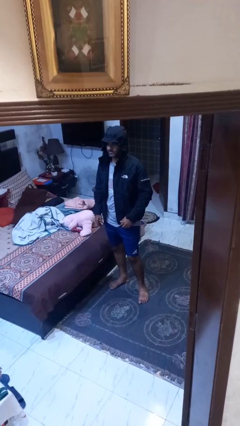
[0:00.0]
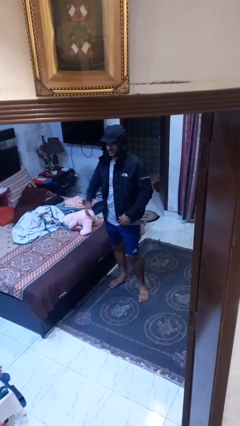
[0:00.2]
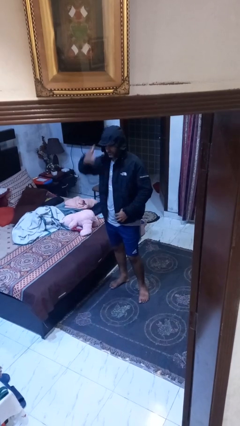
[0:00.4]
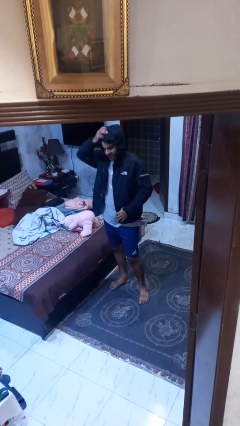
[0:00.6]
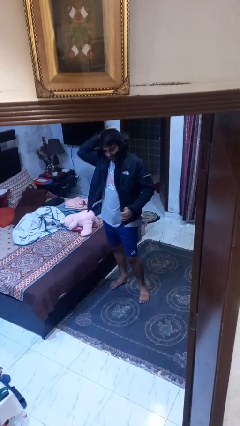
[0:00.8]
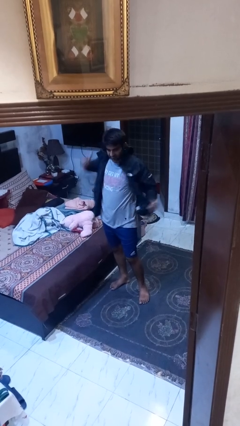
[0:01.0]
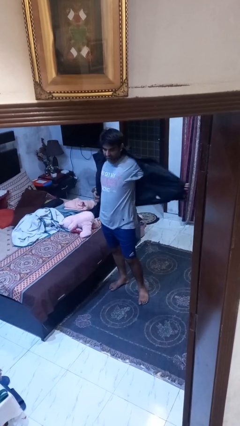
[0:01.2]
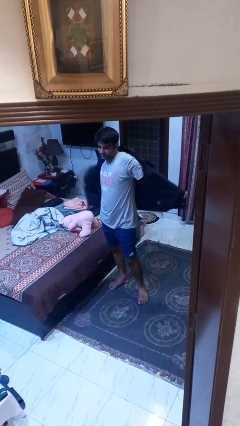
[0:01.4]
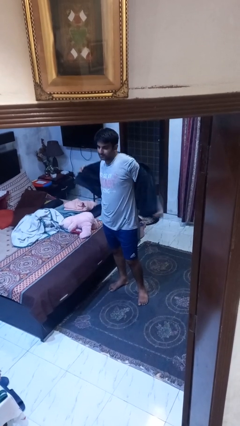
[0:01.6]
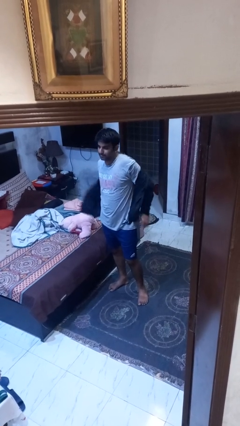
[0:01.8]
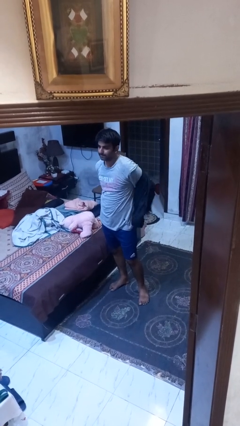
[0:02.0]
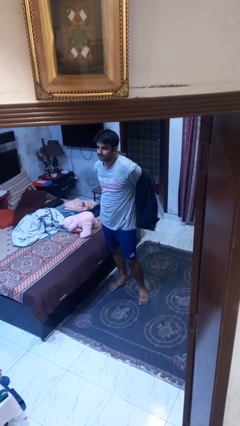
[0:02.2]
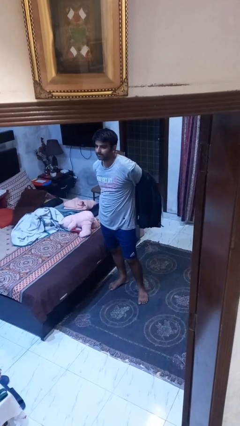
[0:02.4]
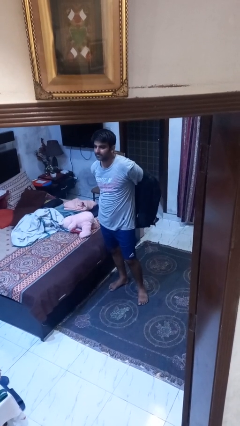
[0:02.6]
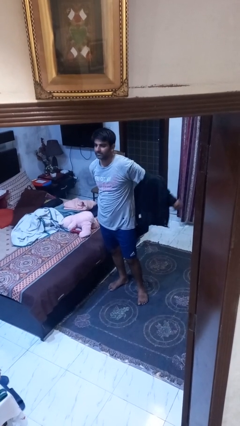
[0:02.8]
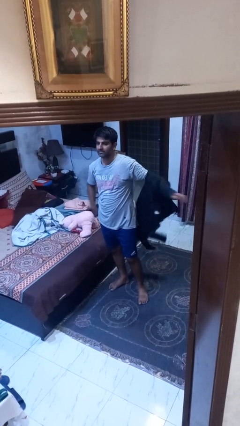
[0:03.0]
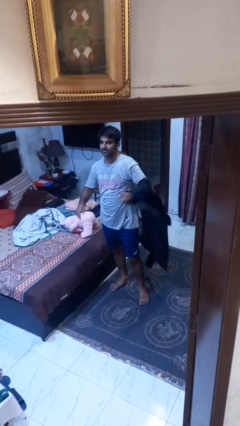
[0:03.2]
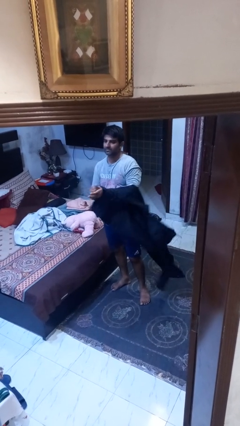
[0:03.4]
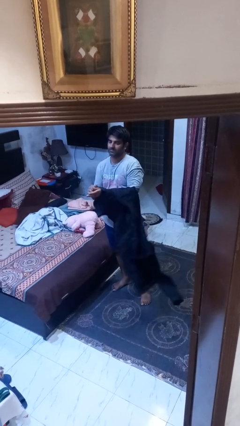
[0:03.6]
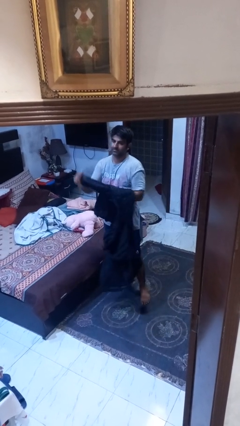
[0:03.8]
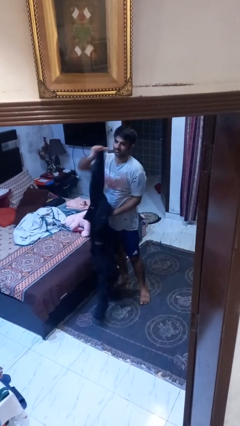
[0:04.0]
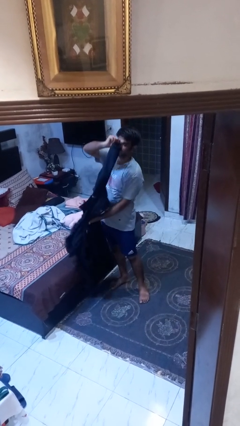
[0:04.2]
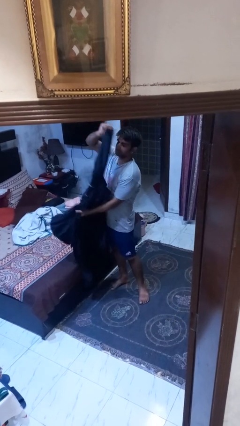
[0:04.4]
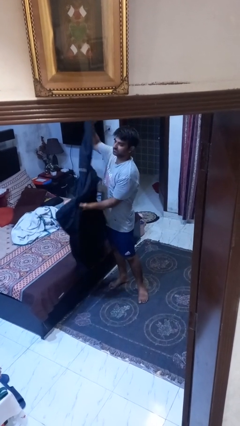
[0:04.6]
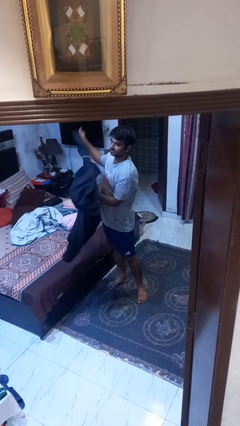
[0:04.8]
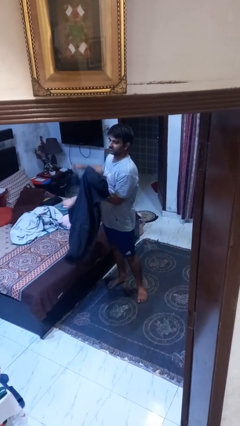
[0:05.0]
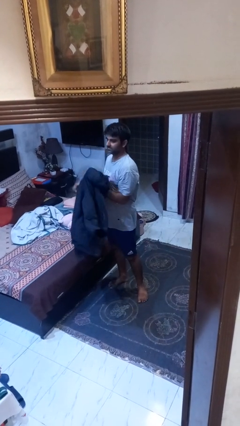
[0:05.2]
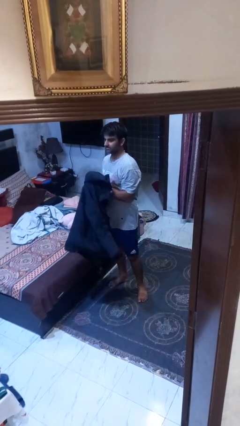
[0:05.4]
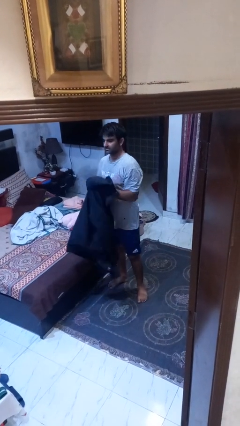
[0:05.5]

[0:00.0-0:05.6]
person takes off hoodie

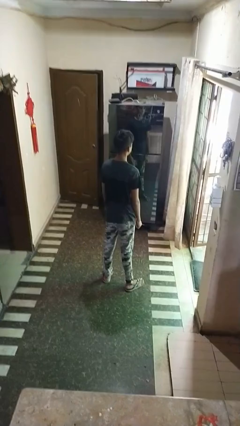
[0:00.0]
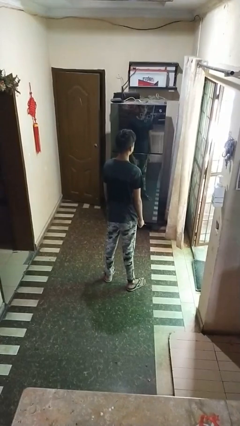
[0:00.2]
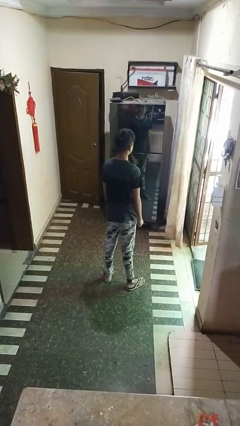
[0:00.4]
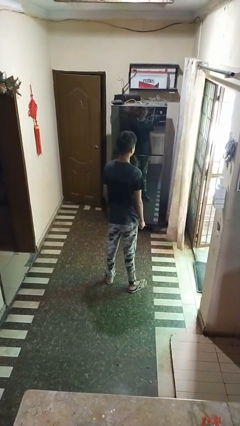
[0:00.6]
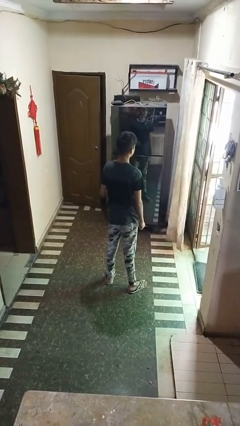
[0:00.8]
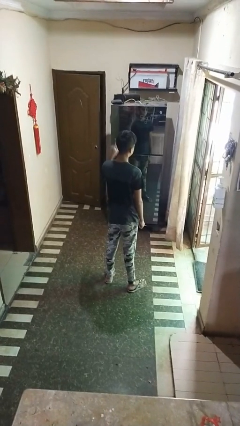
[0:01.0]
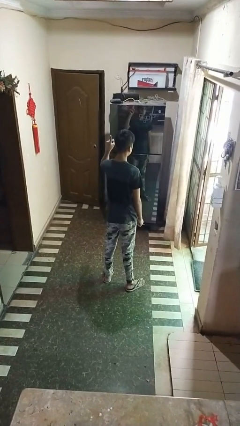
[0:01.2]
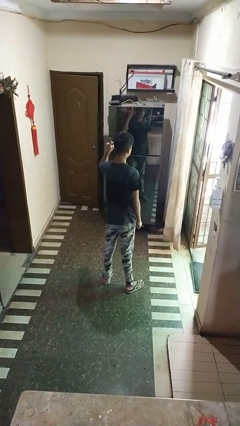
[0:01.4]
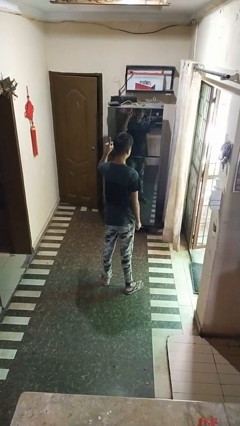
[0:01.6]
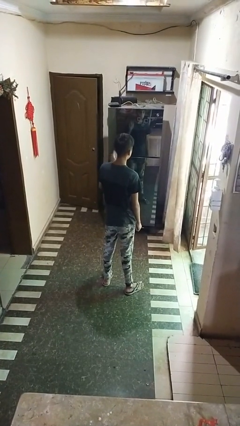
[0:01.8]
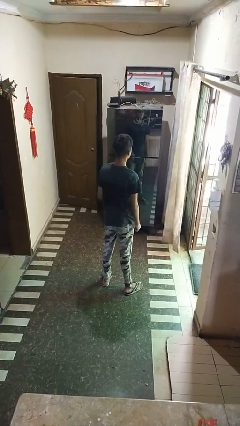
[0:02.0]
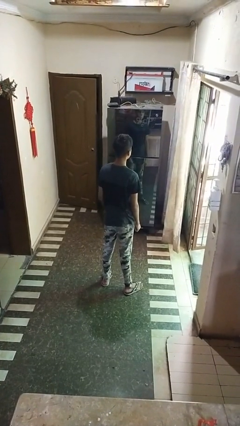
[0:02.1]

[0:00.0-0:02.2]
person gestures number one

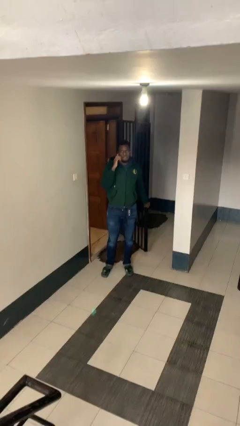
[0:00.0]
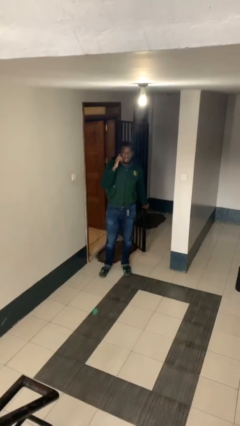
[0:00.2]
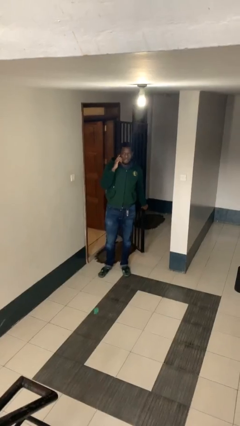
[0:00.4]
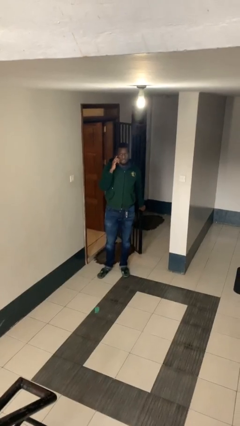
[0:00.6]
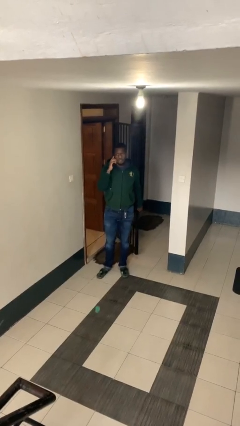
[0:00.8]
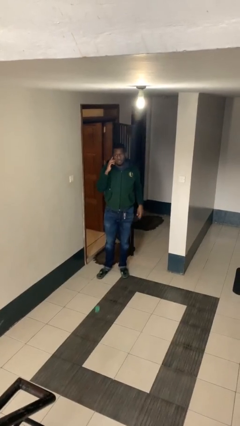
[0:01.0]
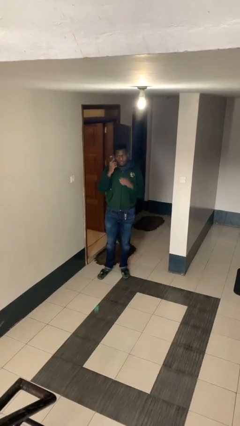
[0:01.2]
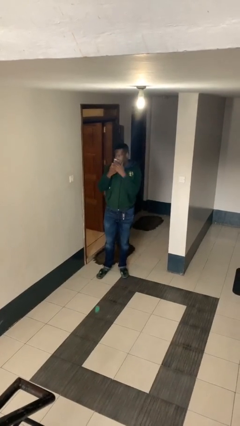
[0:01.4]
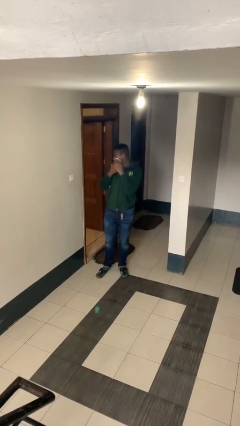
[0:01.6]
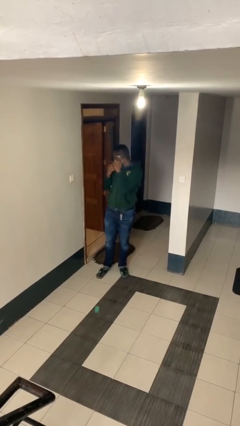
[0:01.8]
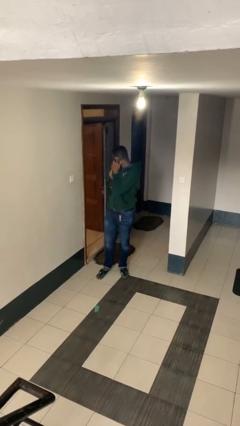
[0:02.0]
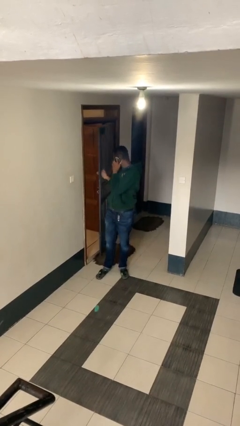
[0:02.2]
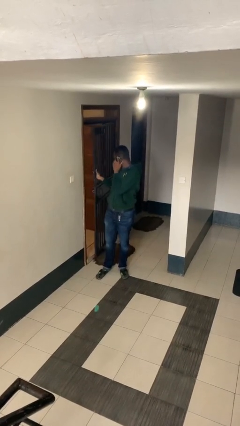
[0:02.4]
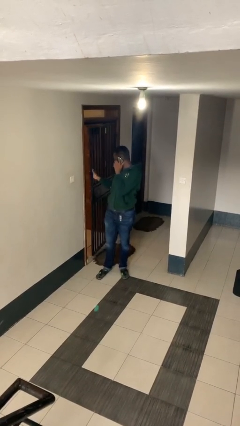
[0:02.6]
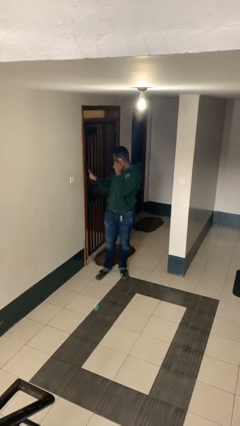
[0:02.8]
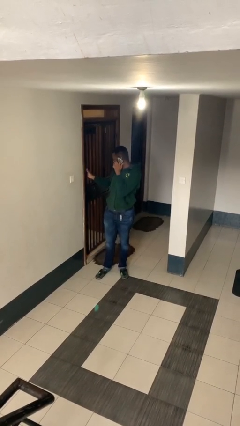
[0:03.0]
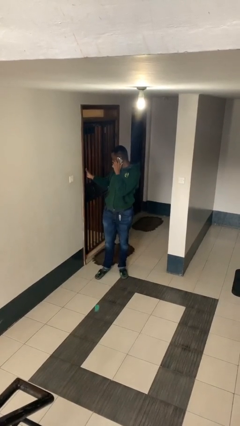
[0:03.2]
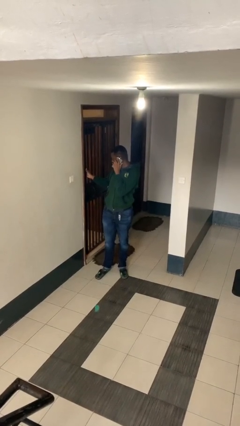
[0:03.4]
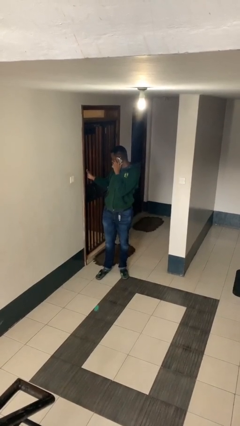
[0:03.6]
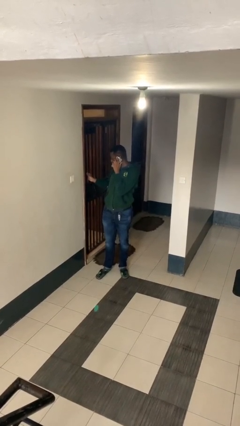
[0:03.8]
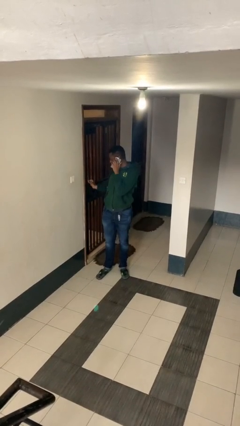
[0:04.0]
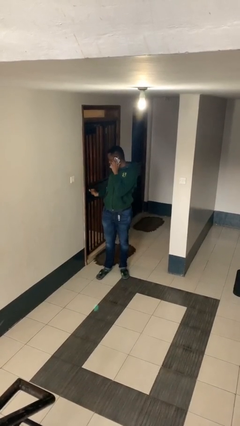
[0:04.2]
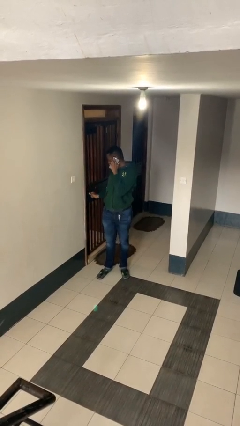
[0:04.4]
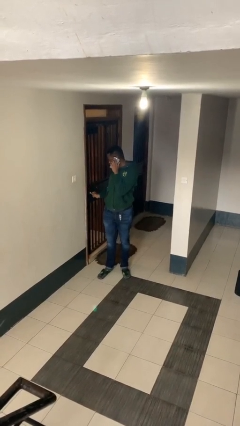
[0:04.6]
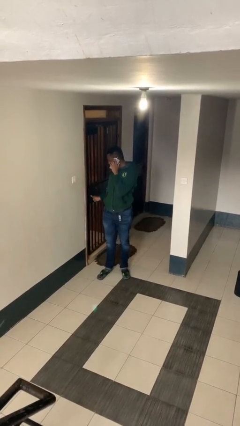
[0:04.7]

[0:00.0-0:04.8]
person closes facility door

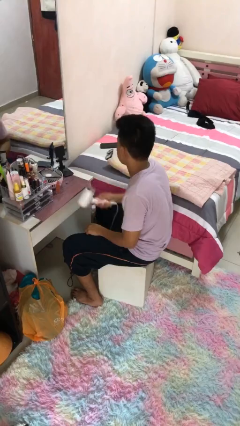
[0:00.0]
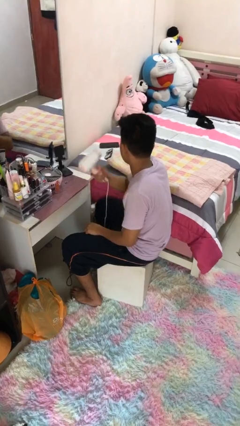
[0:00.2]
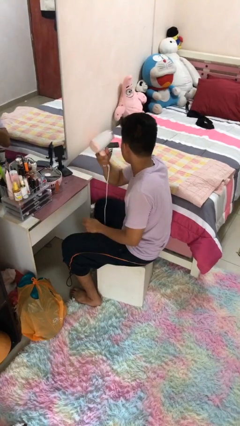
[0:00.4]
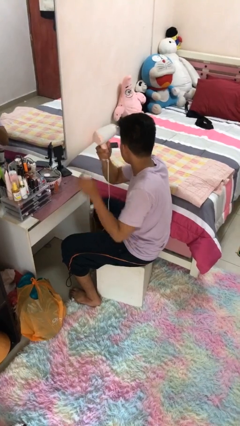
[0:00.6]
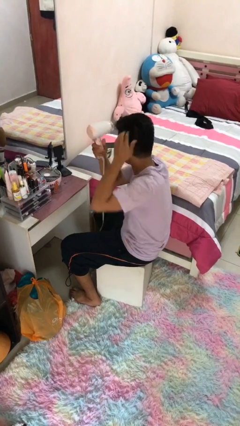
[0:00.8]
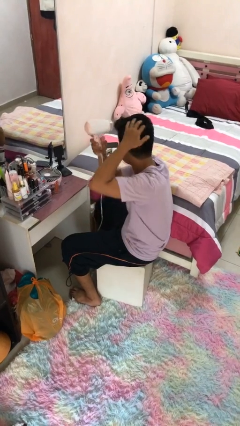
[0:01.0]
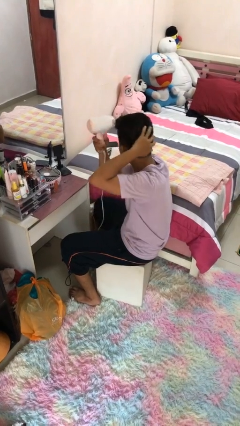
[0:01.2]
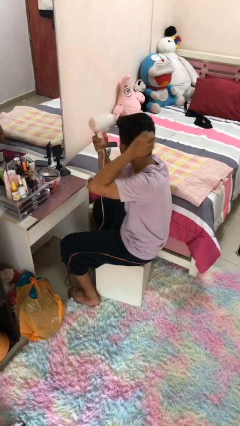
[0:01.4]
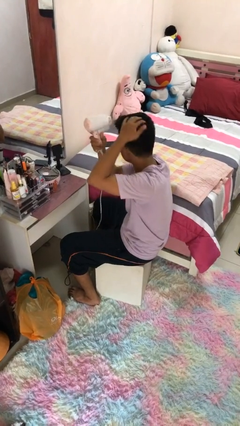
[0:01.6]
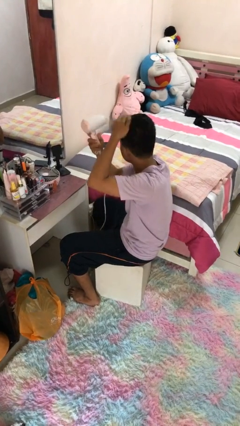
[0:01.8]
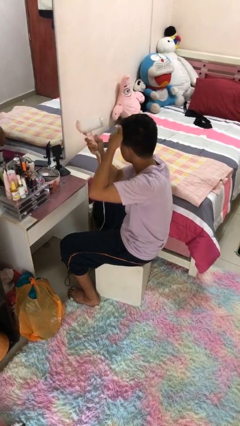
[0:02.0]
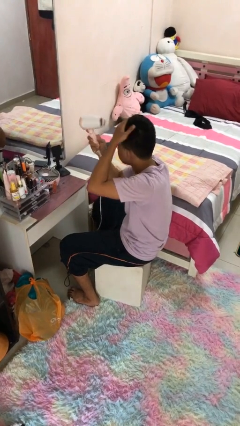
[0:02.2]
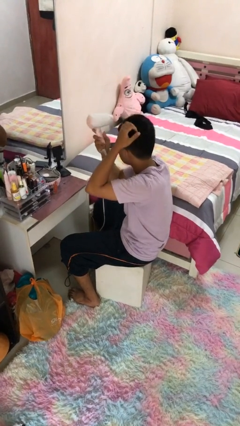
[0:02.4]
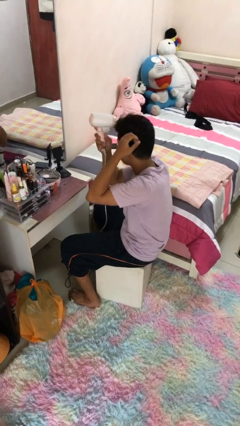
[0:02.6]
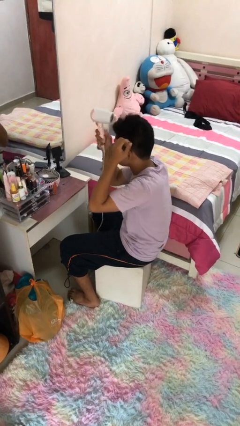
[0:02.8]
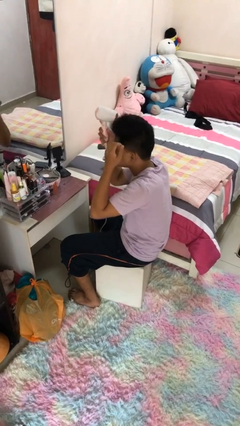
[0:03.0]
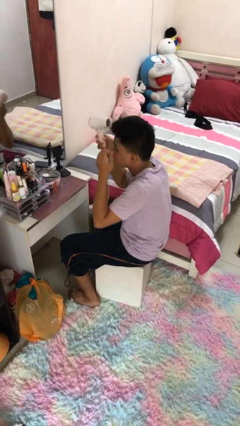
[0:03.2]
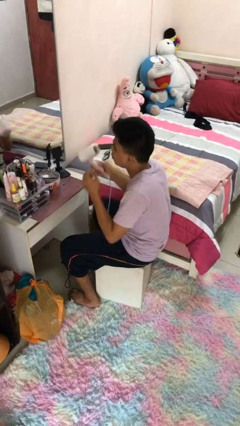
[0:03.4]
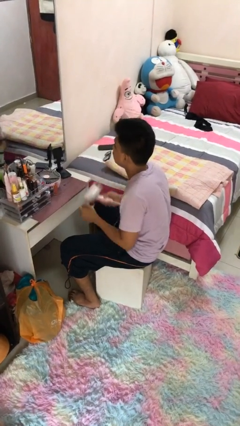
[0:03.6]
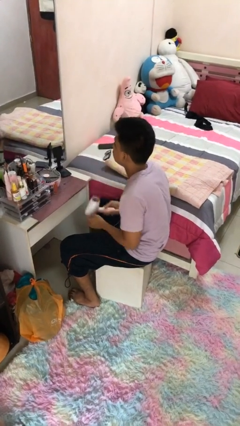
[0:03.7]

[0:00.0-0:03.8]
person dries hair with hairdryer

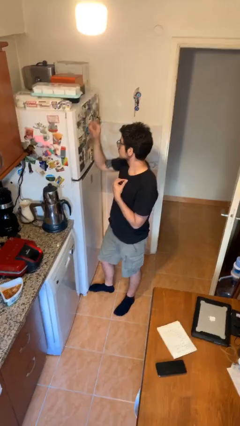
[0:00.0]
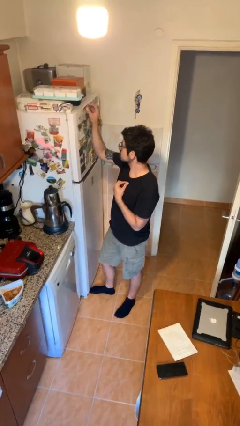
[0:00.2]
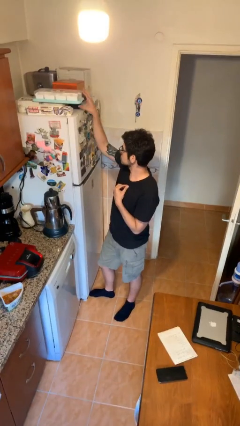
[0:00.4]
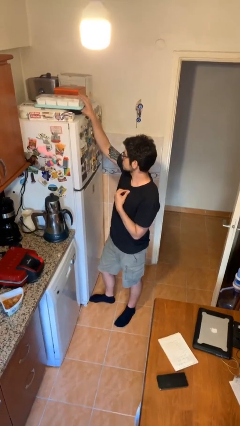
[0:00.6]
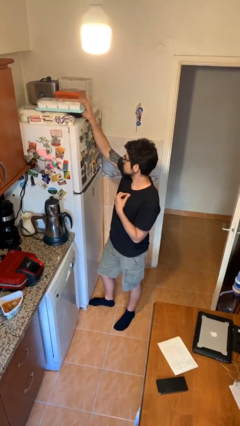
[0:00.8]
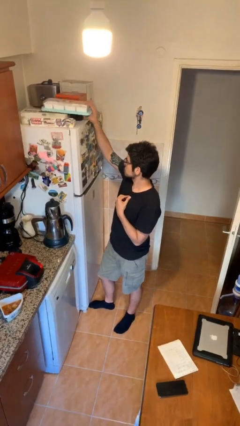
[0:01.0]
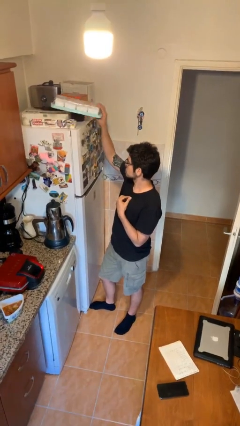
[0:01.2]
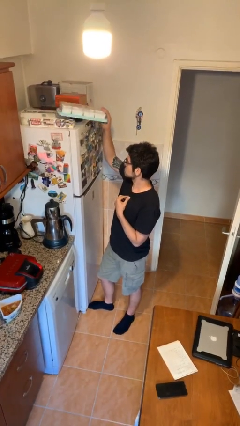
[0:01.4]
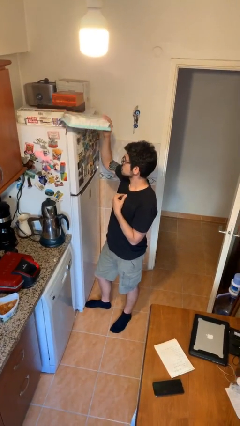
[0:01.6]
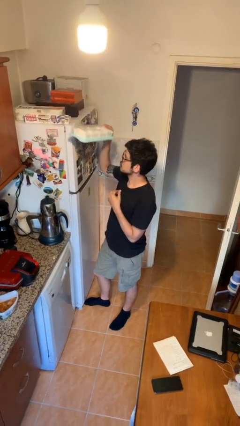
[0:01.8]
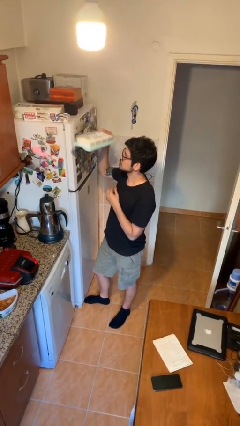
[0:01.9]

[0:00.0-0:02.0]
person picks up object from shelf
